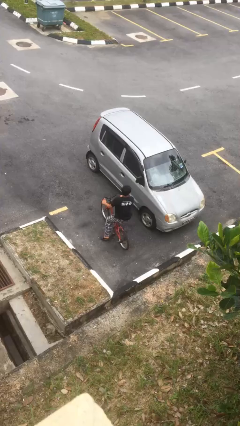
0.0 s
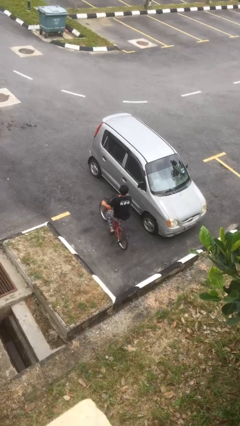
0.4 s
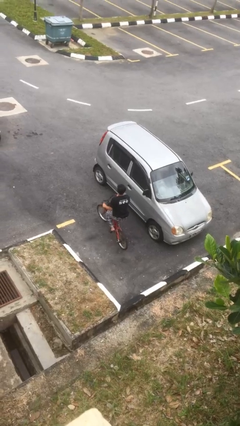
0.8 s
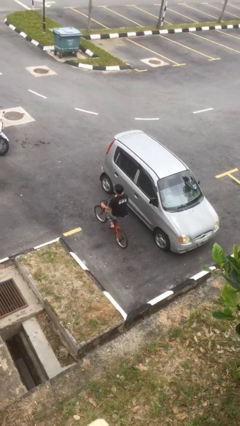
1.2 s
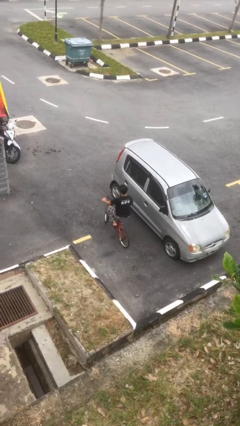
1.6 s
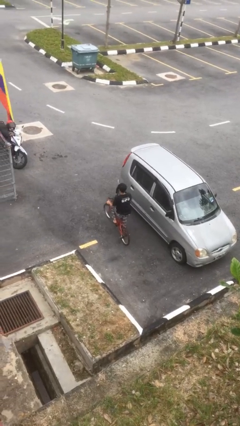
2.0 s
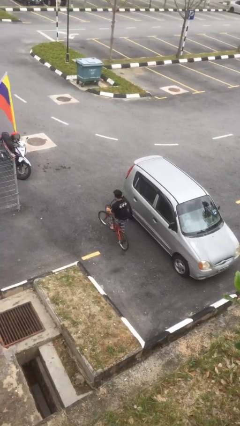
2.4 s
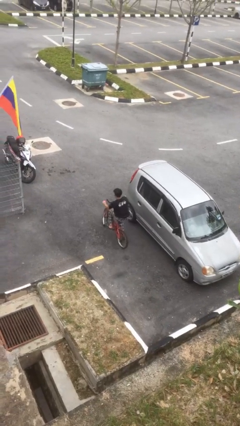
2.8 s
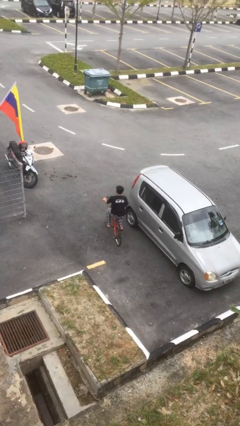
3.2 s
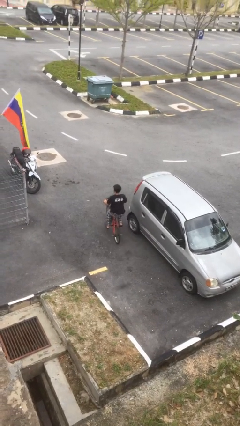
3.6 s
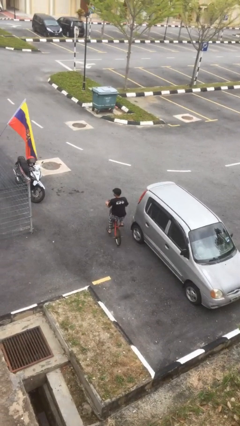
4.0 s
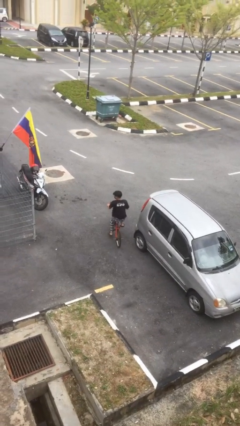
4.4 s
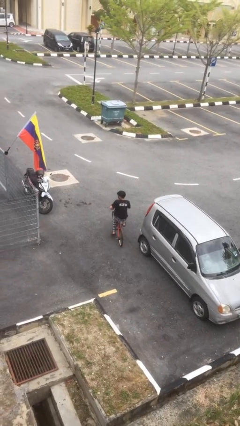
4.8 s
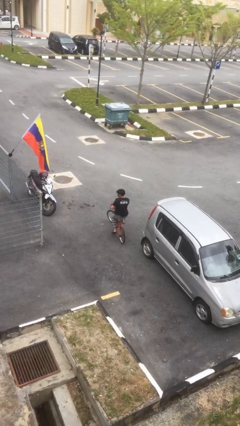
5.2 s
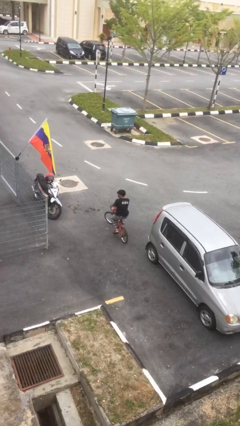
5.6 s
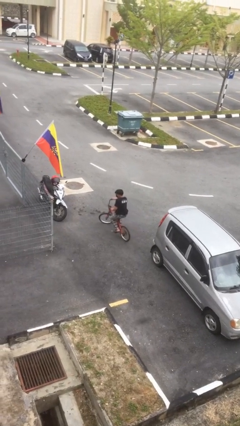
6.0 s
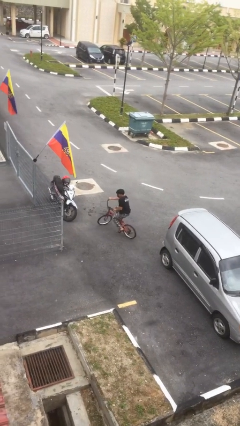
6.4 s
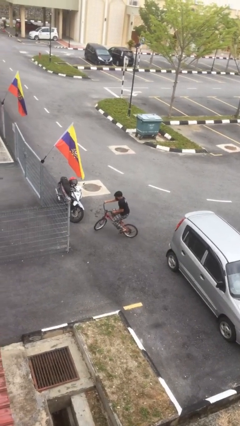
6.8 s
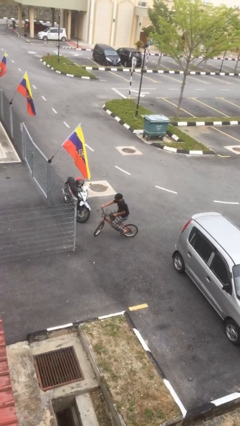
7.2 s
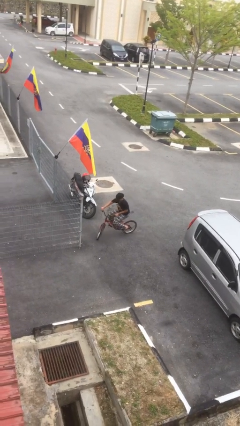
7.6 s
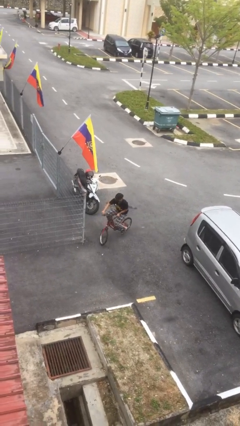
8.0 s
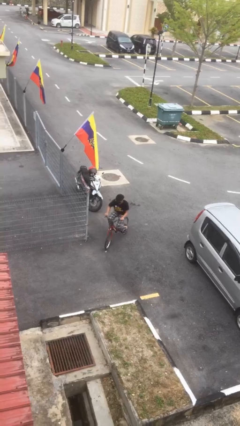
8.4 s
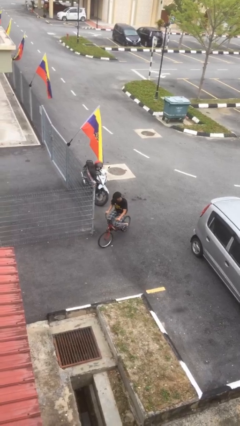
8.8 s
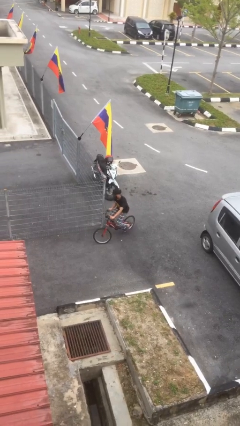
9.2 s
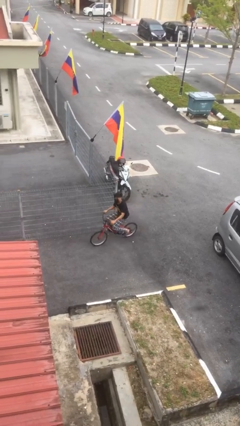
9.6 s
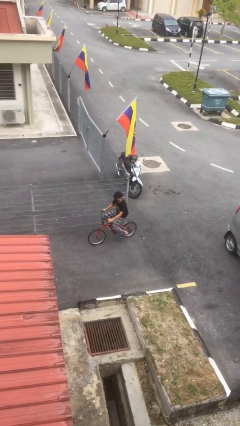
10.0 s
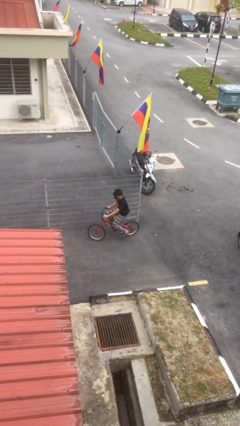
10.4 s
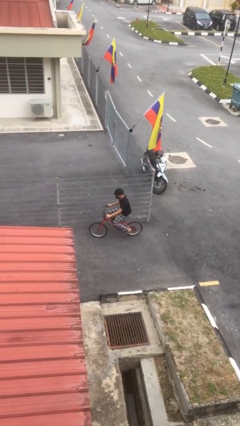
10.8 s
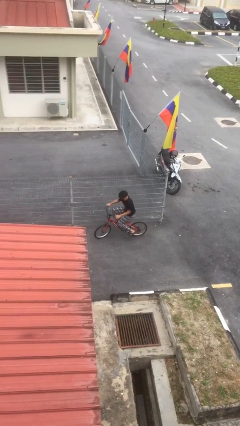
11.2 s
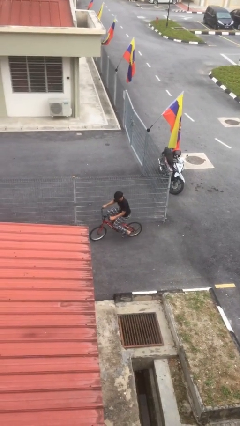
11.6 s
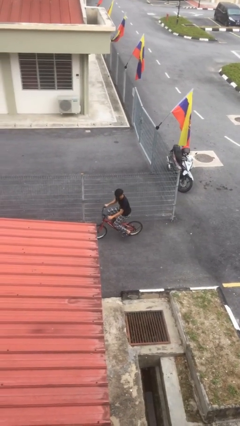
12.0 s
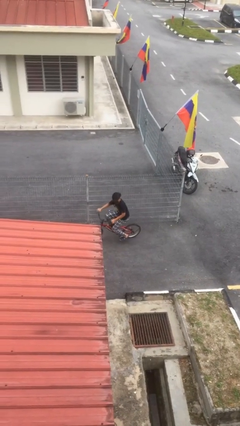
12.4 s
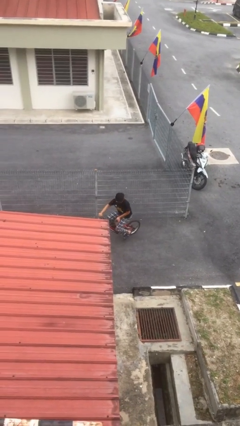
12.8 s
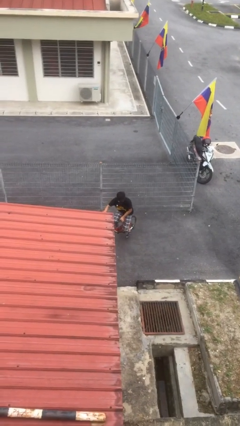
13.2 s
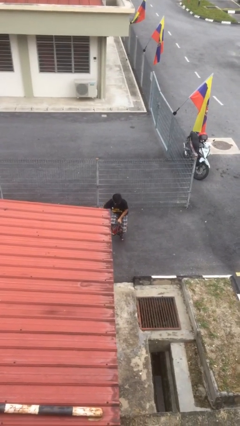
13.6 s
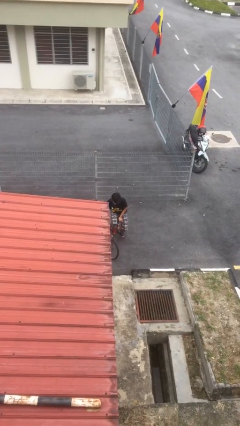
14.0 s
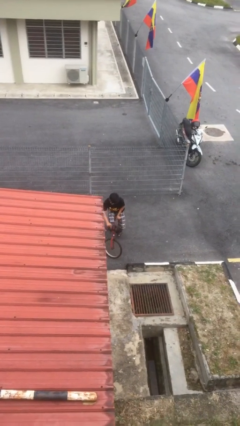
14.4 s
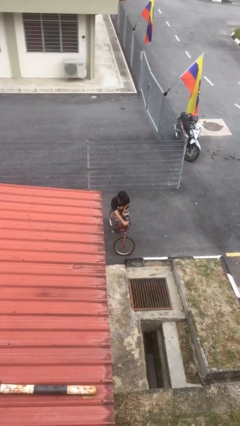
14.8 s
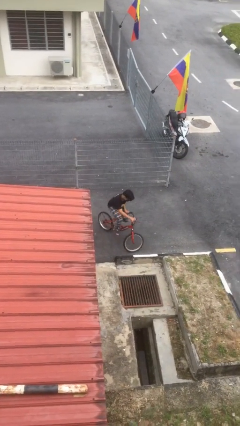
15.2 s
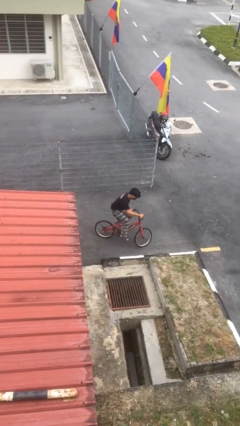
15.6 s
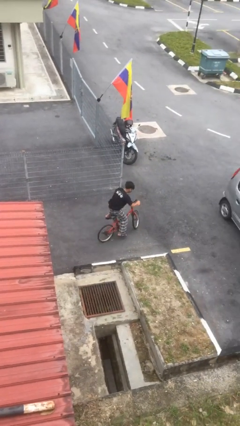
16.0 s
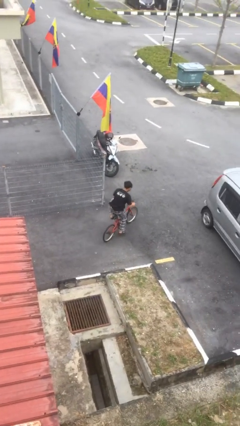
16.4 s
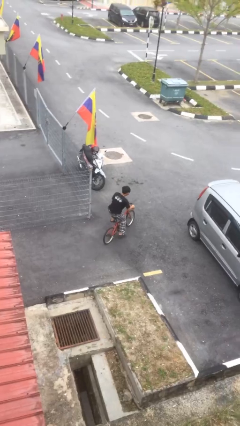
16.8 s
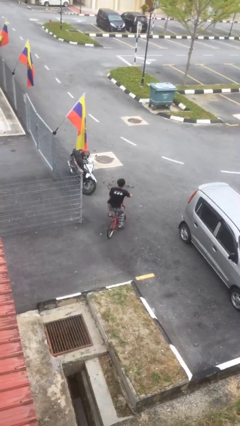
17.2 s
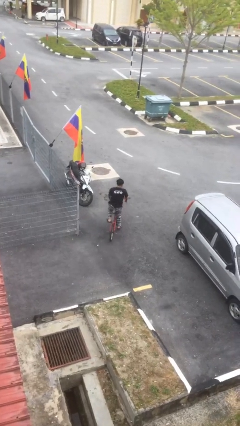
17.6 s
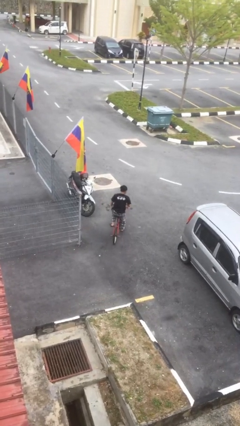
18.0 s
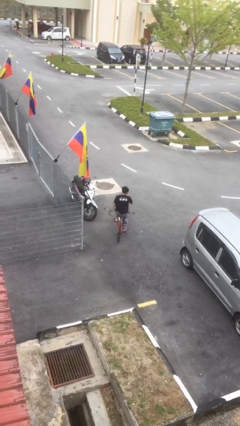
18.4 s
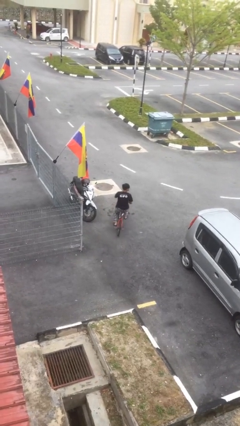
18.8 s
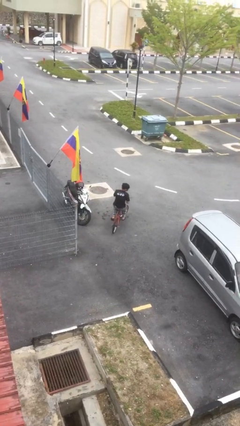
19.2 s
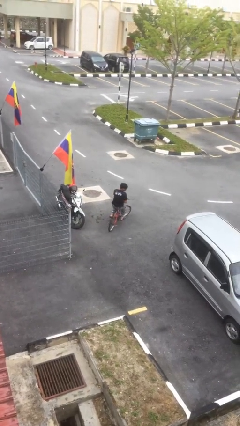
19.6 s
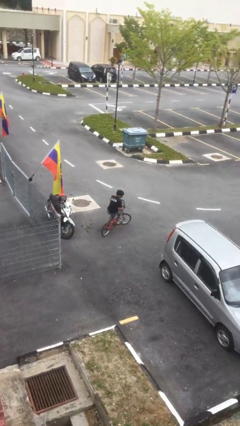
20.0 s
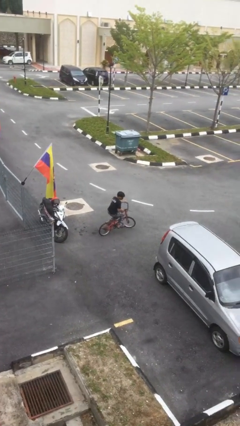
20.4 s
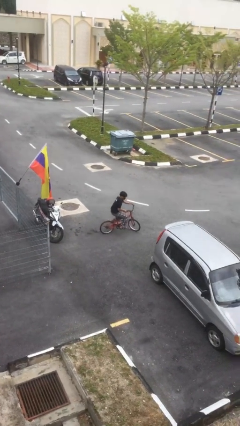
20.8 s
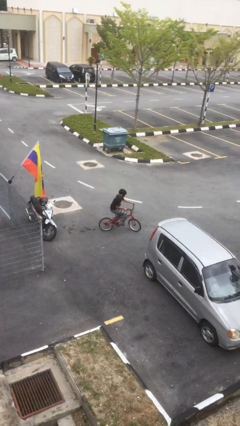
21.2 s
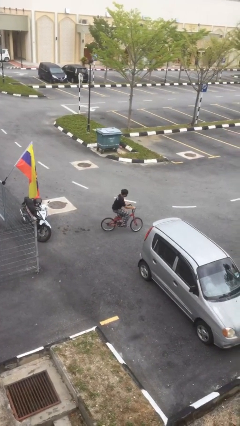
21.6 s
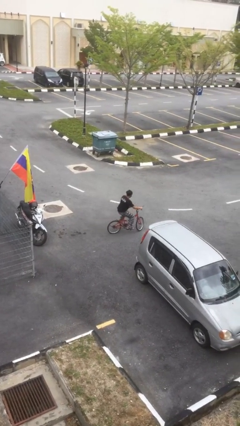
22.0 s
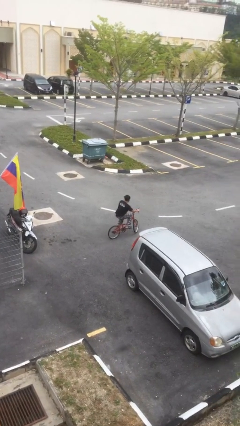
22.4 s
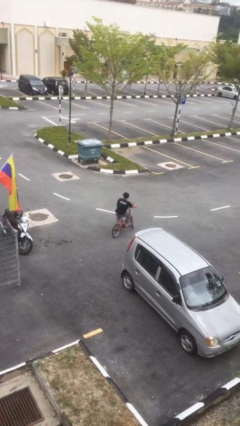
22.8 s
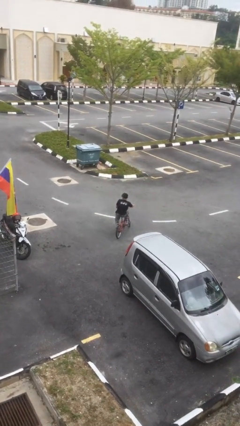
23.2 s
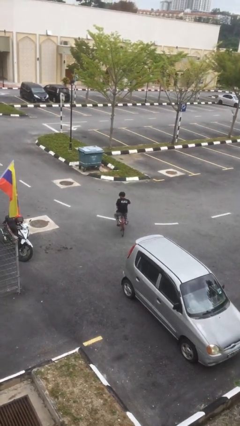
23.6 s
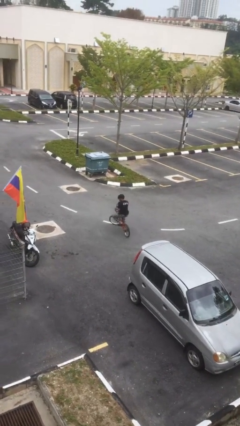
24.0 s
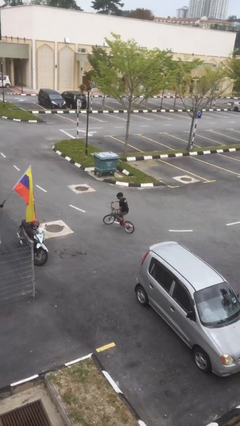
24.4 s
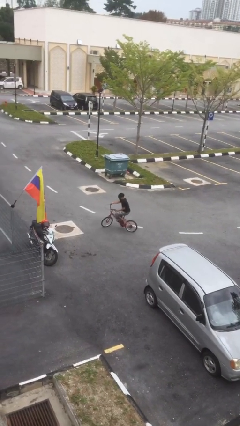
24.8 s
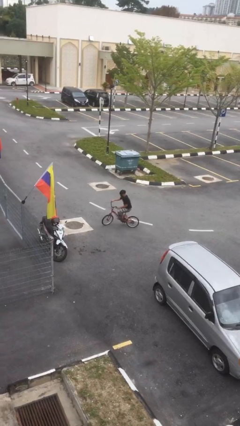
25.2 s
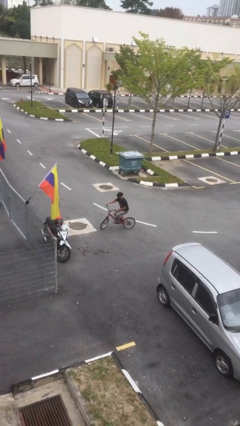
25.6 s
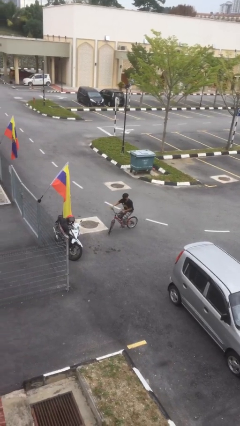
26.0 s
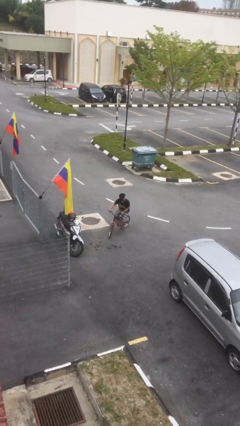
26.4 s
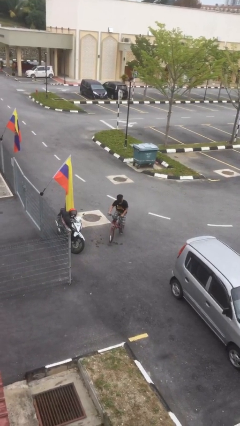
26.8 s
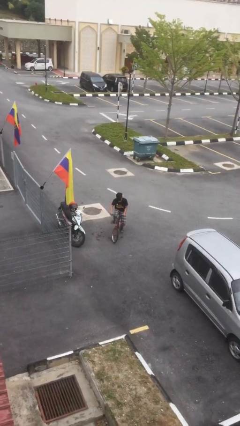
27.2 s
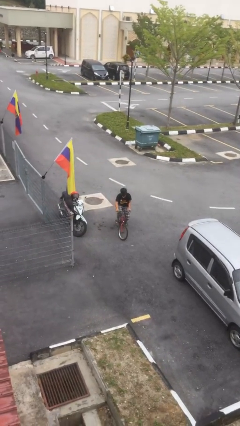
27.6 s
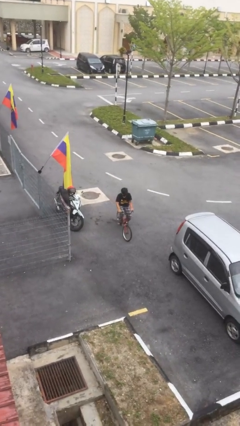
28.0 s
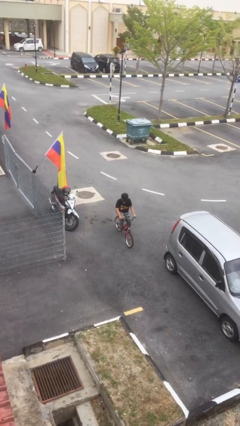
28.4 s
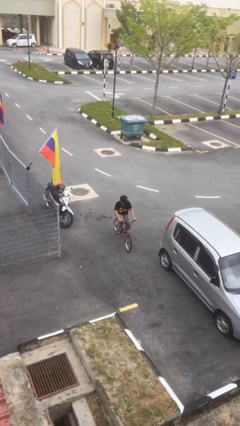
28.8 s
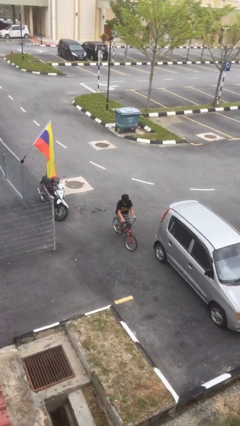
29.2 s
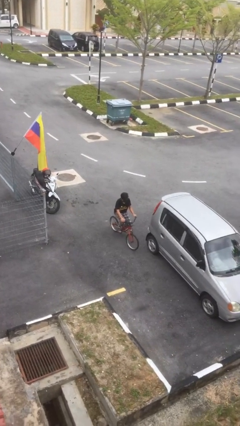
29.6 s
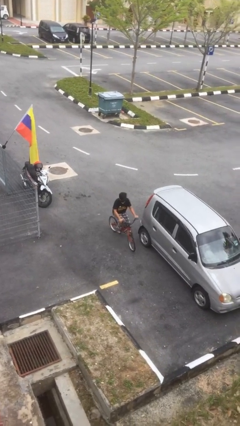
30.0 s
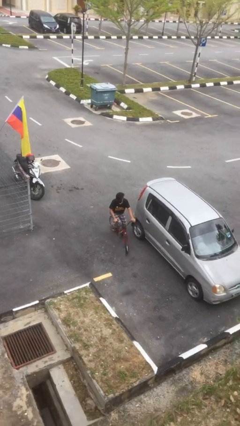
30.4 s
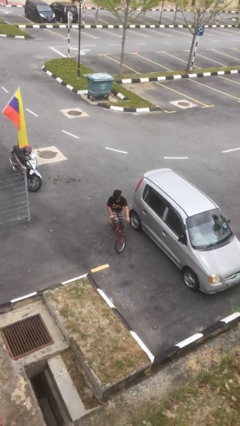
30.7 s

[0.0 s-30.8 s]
person rides bicycle

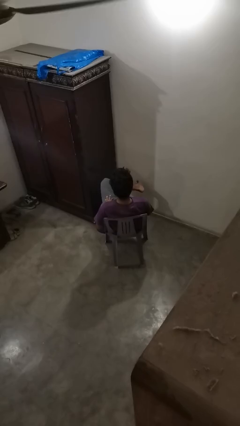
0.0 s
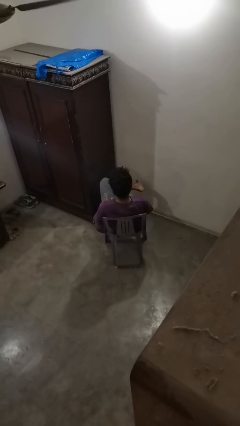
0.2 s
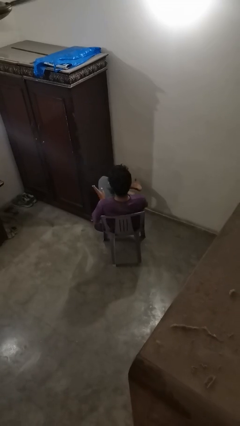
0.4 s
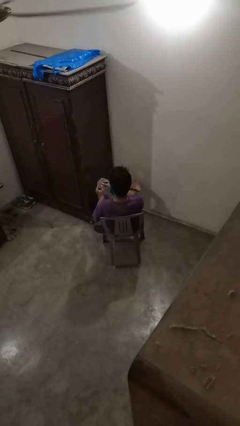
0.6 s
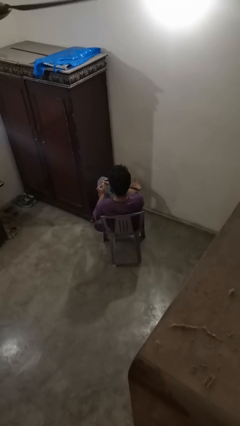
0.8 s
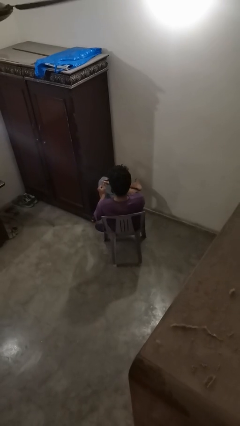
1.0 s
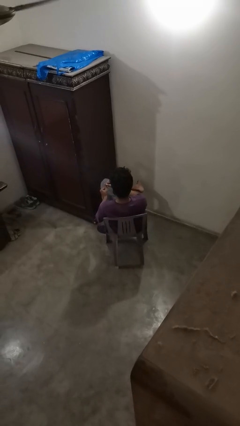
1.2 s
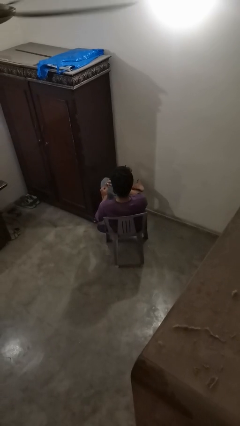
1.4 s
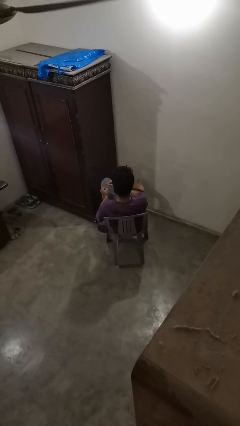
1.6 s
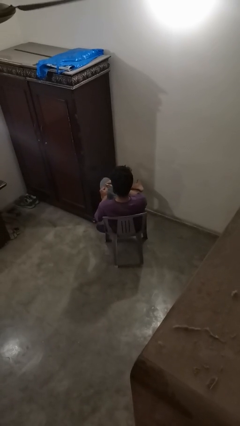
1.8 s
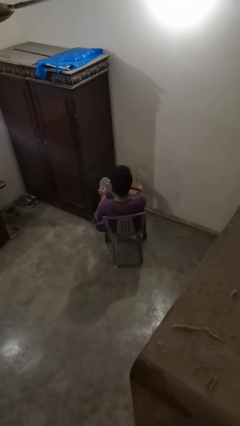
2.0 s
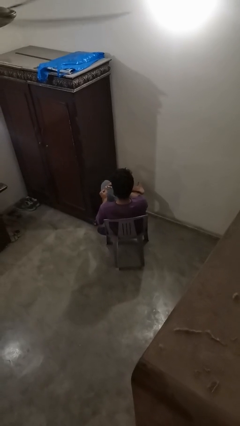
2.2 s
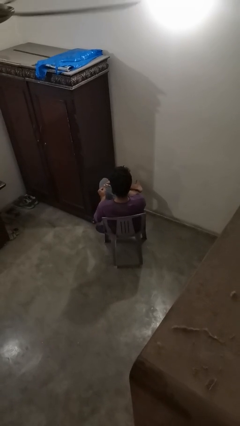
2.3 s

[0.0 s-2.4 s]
person files fingernails

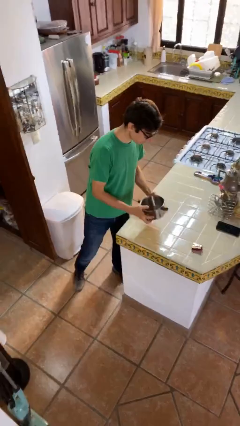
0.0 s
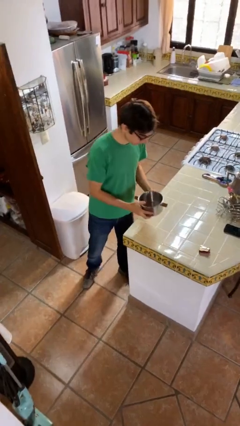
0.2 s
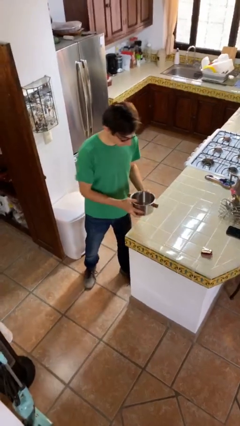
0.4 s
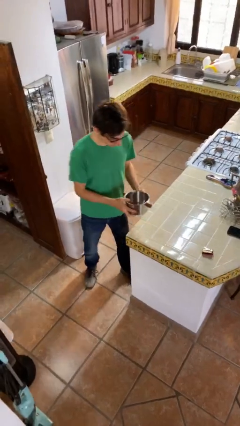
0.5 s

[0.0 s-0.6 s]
person picks up object from table
